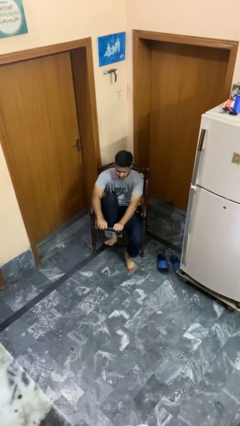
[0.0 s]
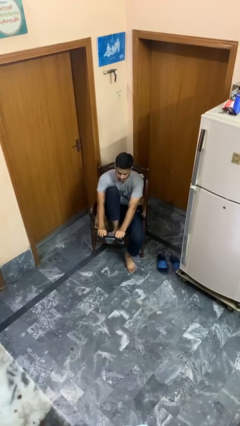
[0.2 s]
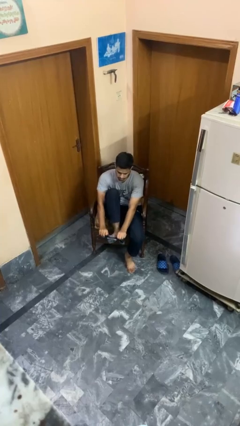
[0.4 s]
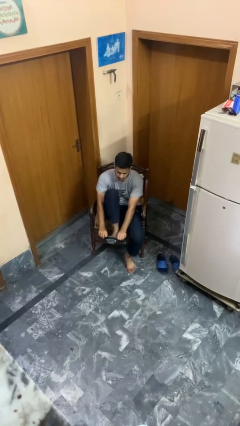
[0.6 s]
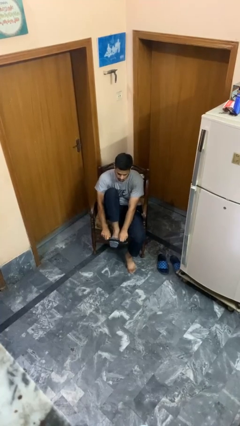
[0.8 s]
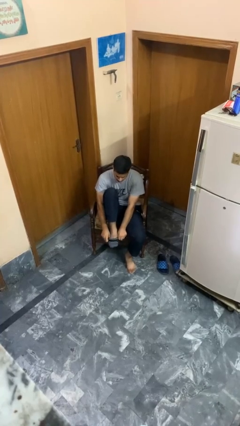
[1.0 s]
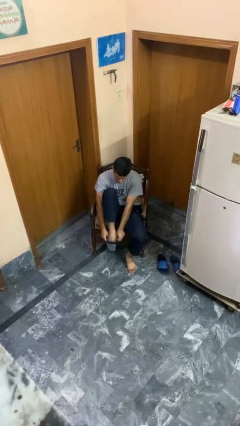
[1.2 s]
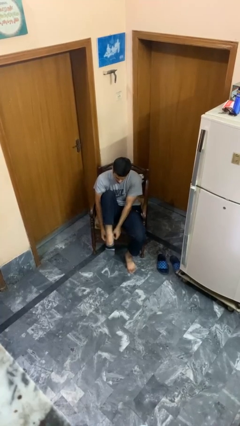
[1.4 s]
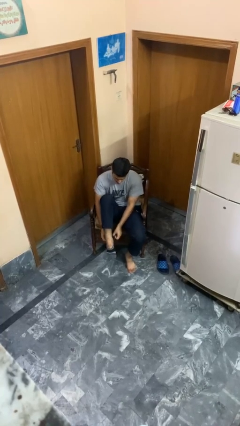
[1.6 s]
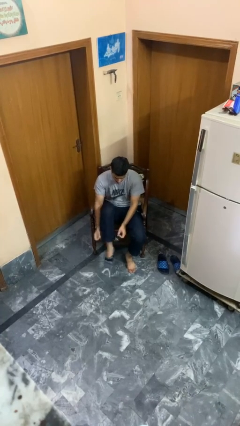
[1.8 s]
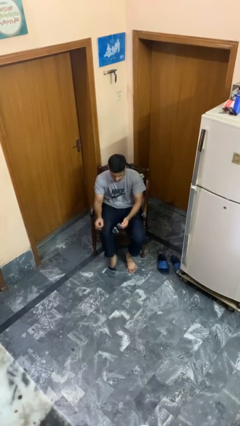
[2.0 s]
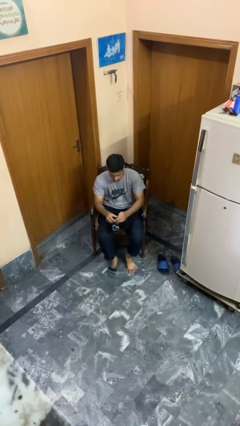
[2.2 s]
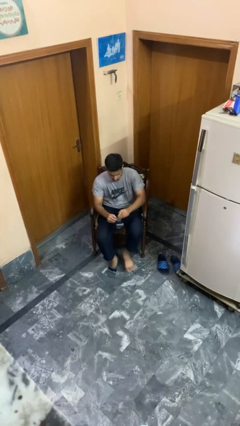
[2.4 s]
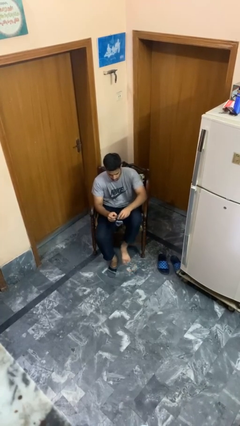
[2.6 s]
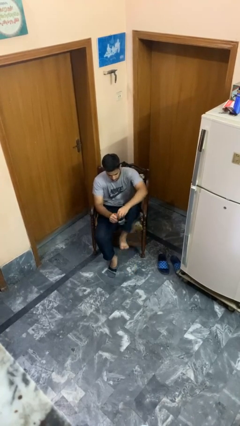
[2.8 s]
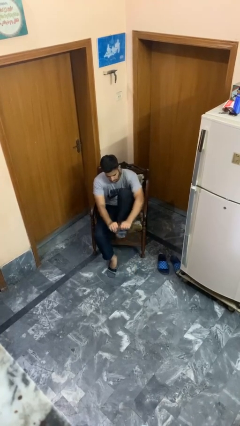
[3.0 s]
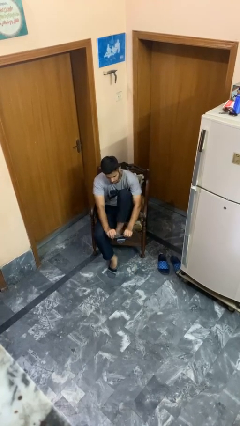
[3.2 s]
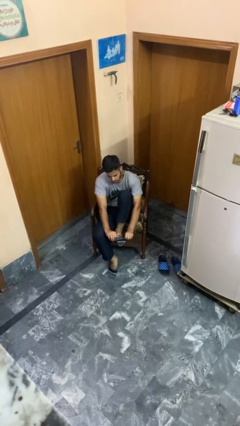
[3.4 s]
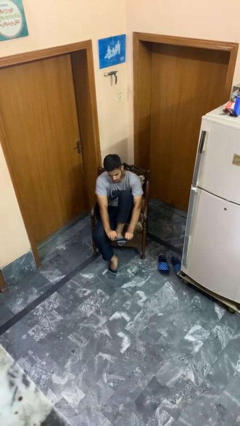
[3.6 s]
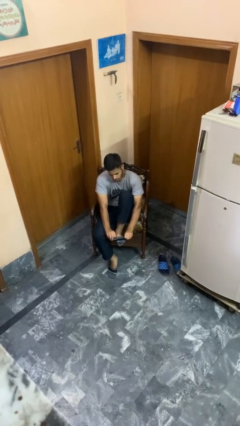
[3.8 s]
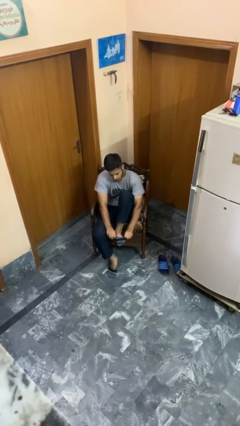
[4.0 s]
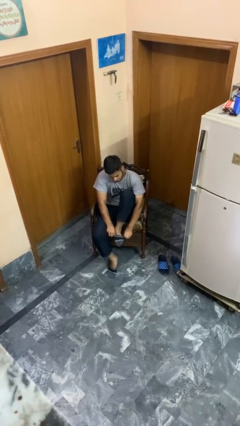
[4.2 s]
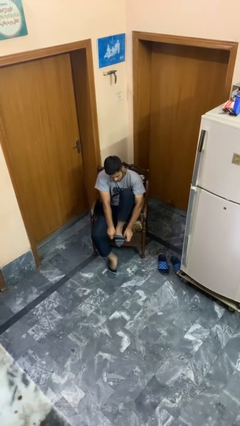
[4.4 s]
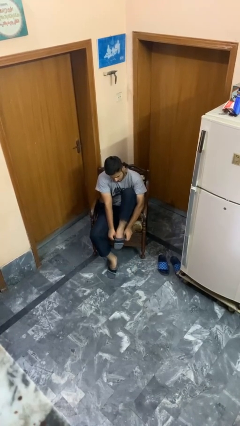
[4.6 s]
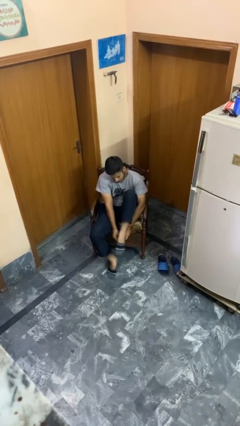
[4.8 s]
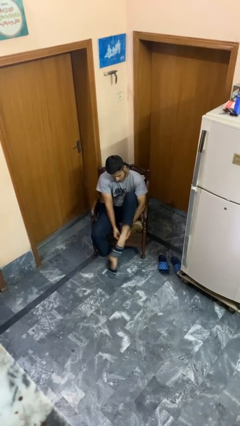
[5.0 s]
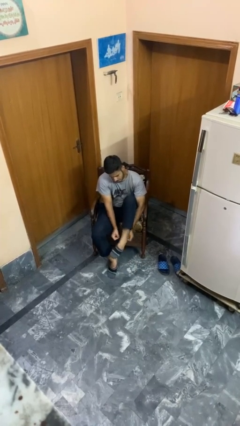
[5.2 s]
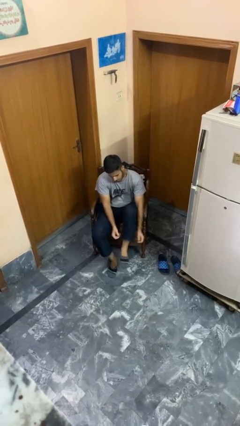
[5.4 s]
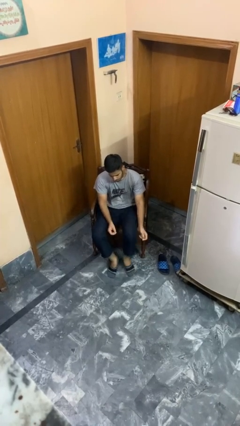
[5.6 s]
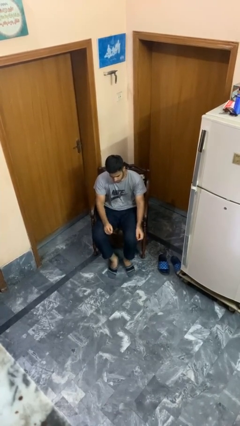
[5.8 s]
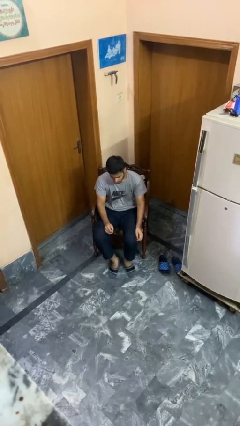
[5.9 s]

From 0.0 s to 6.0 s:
person puts on socks

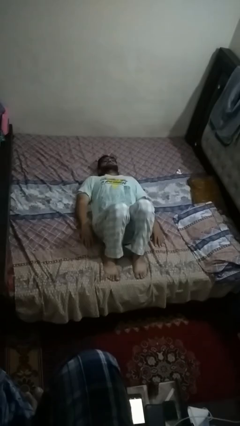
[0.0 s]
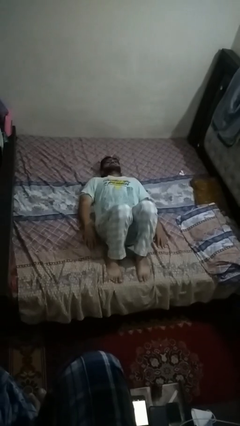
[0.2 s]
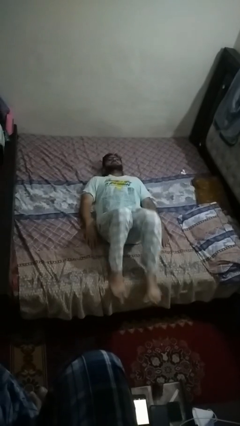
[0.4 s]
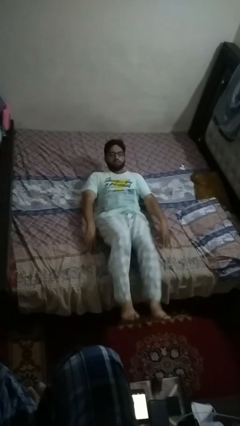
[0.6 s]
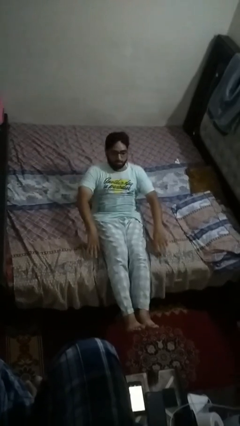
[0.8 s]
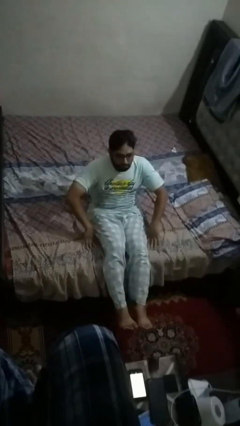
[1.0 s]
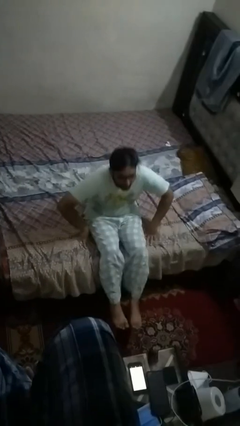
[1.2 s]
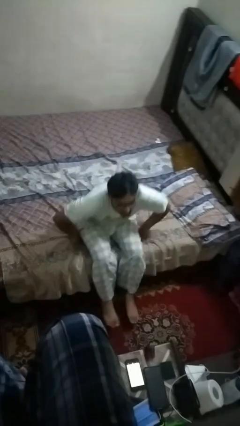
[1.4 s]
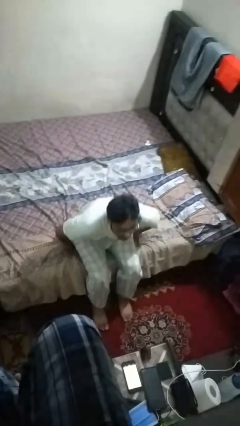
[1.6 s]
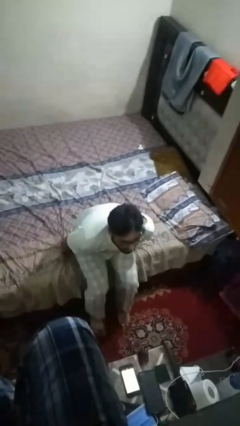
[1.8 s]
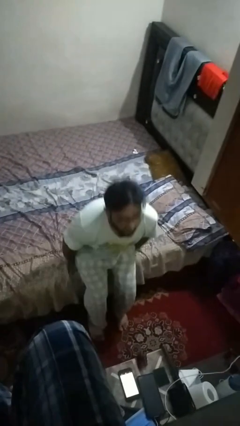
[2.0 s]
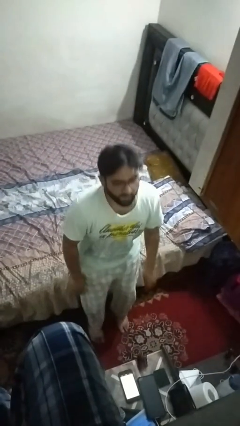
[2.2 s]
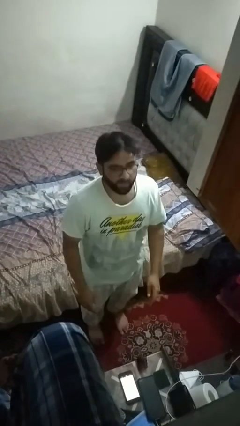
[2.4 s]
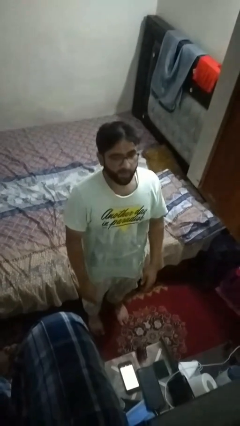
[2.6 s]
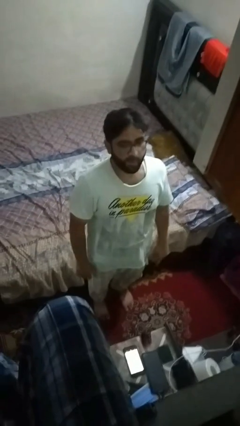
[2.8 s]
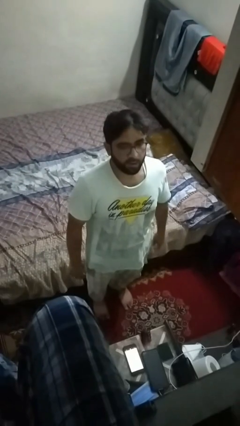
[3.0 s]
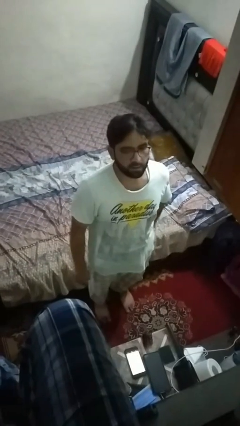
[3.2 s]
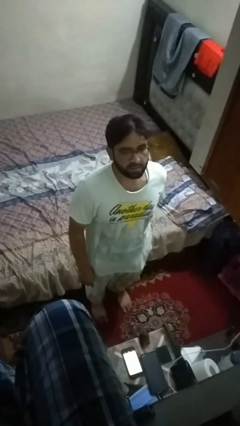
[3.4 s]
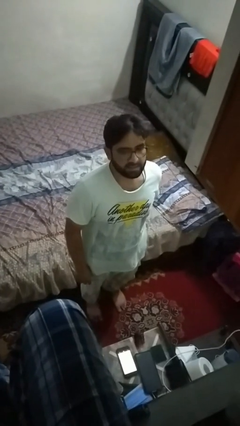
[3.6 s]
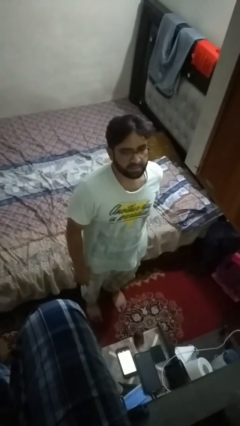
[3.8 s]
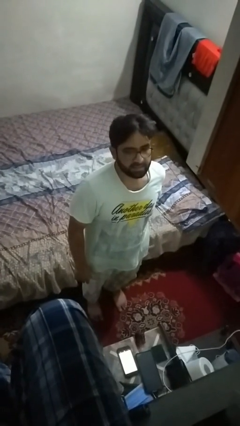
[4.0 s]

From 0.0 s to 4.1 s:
person stands up

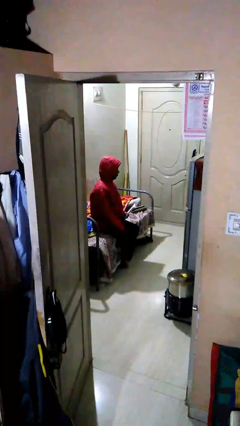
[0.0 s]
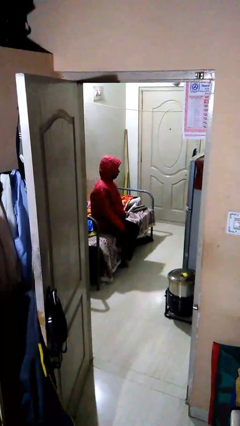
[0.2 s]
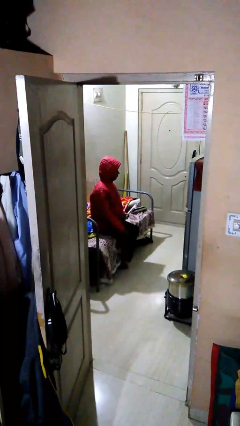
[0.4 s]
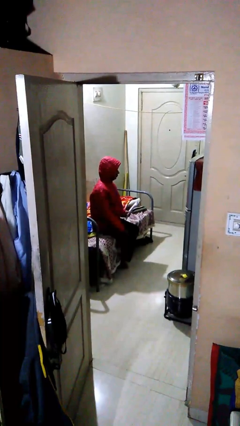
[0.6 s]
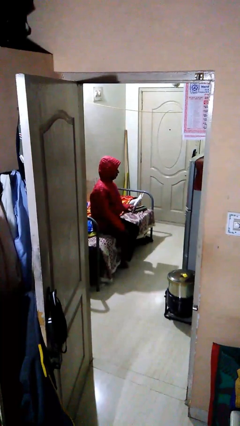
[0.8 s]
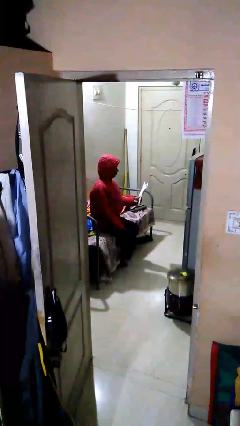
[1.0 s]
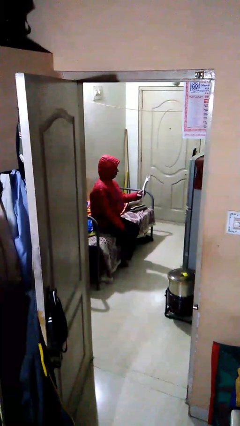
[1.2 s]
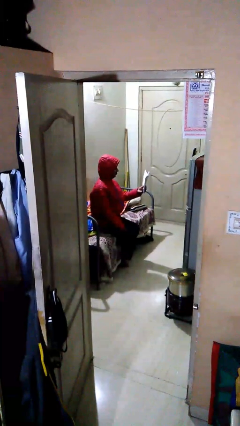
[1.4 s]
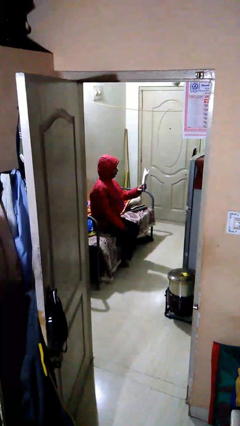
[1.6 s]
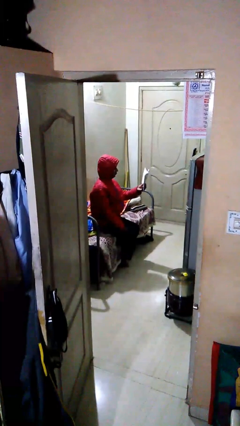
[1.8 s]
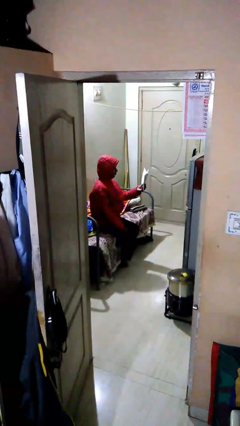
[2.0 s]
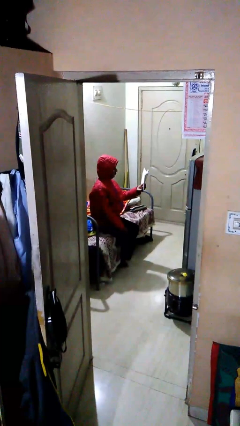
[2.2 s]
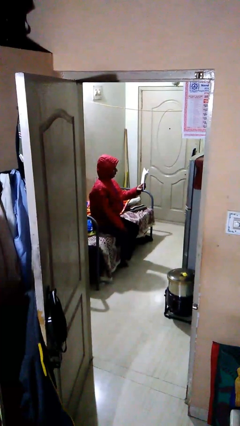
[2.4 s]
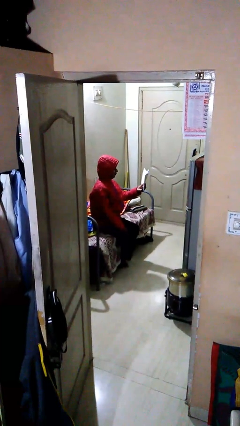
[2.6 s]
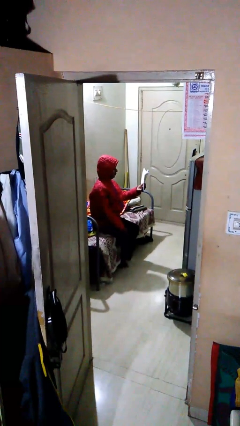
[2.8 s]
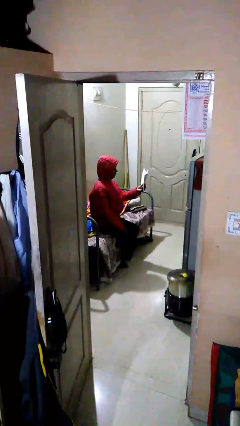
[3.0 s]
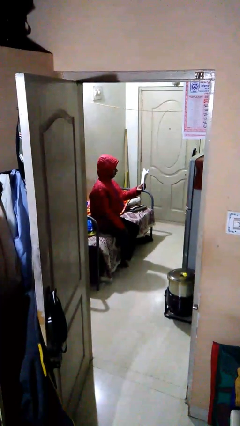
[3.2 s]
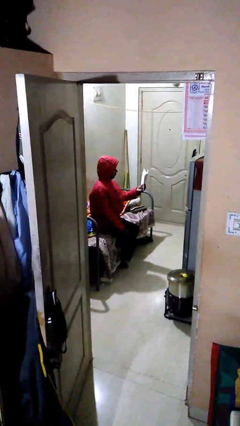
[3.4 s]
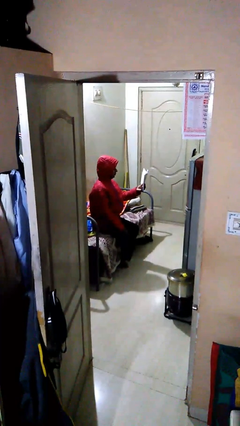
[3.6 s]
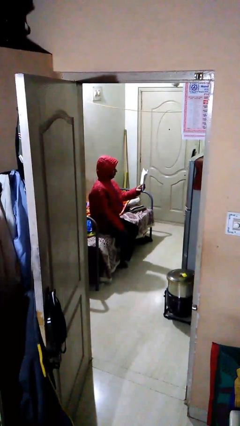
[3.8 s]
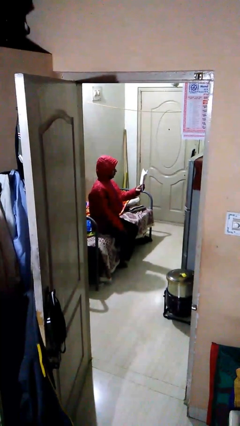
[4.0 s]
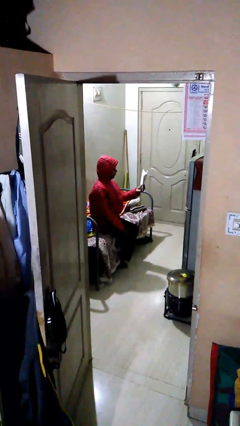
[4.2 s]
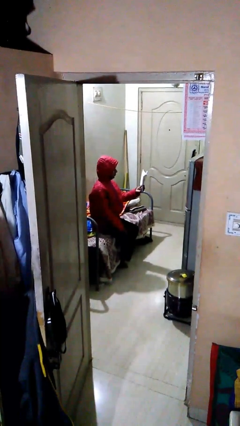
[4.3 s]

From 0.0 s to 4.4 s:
person reads document

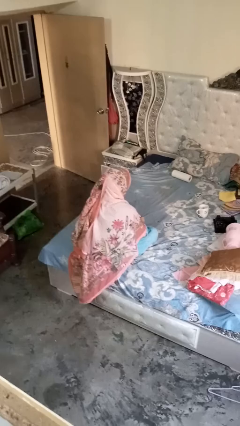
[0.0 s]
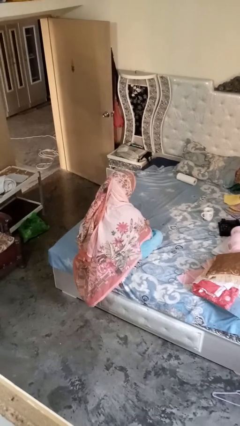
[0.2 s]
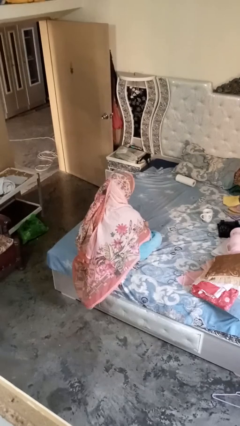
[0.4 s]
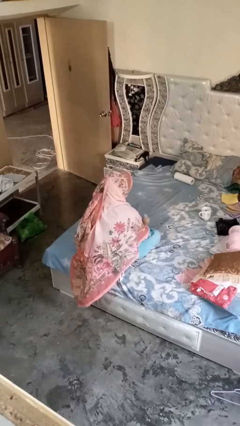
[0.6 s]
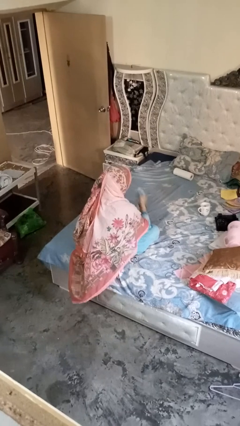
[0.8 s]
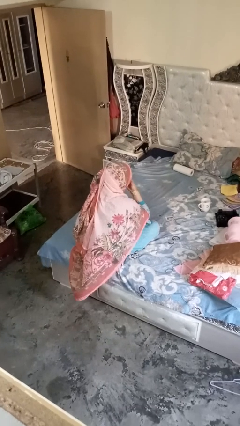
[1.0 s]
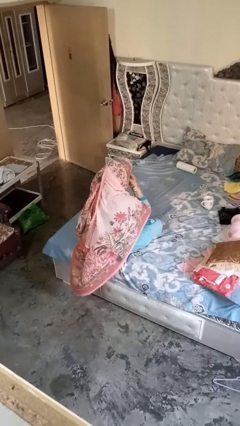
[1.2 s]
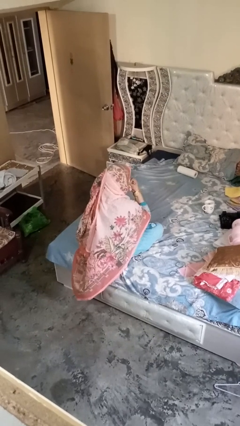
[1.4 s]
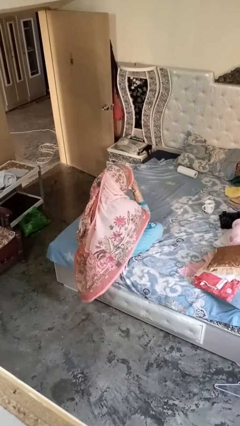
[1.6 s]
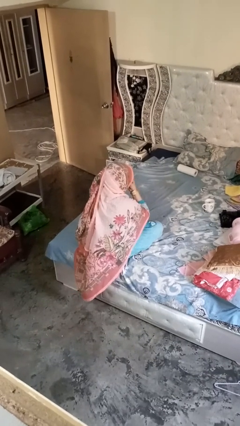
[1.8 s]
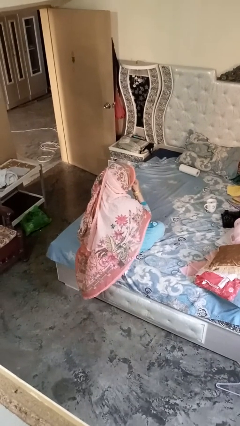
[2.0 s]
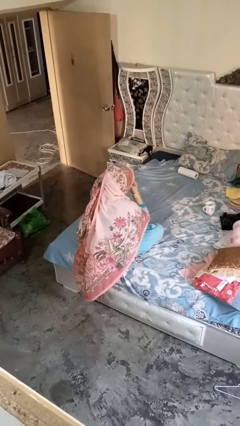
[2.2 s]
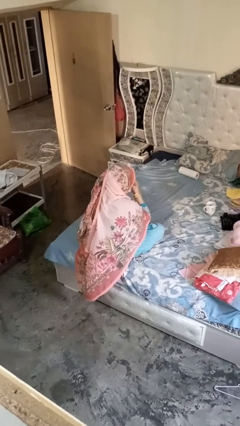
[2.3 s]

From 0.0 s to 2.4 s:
person blows nose

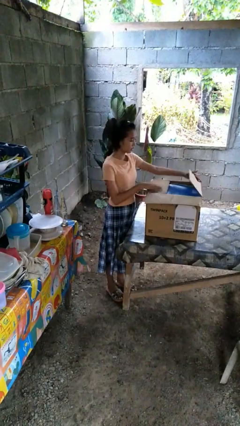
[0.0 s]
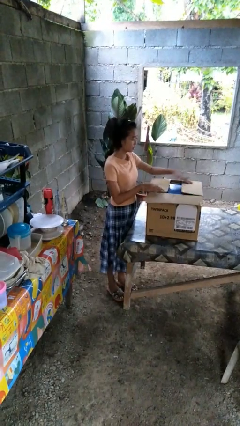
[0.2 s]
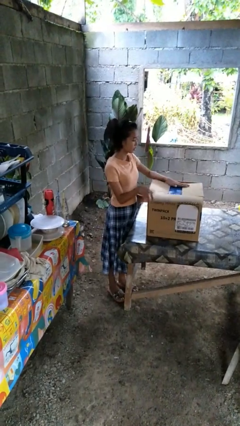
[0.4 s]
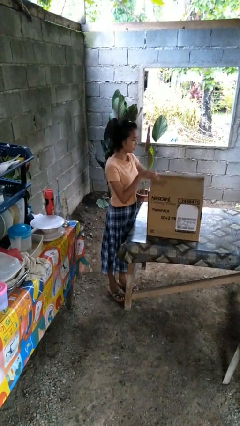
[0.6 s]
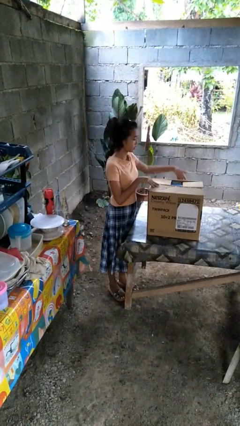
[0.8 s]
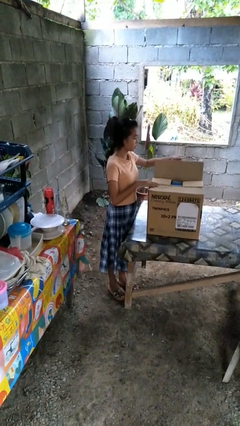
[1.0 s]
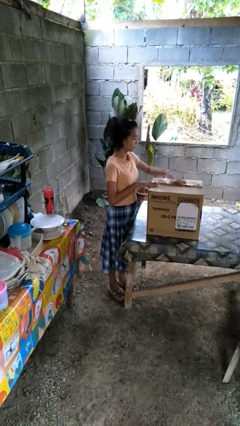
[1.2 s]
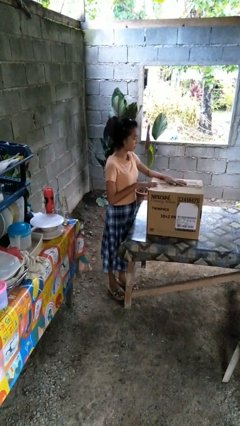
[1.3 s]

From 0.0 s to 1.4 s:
person closes box
